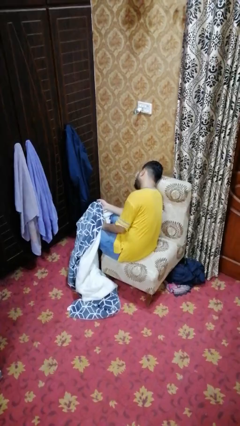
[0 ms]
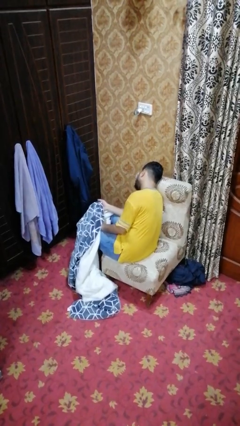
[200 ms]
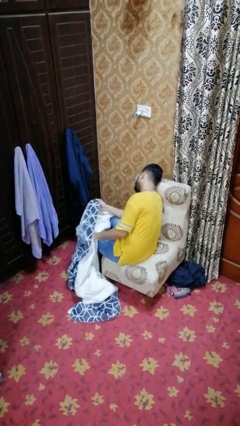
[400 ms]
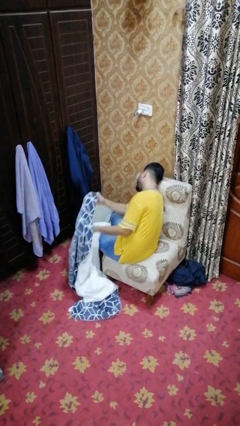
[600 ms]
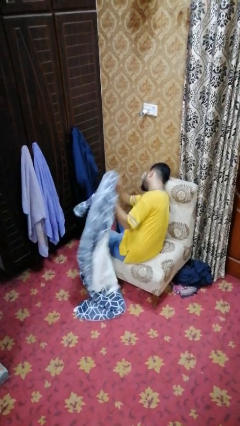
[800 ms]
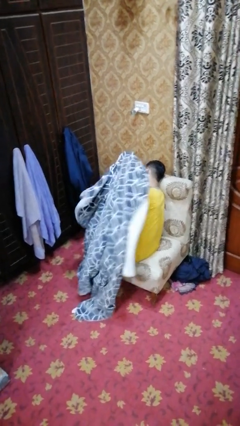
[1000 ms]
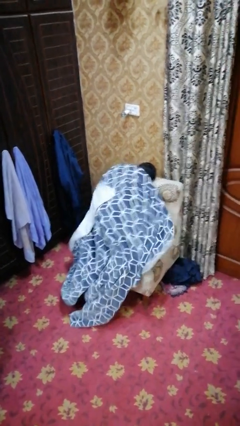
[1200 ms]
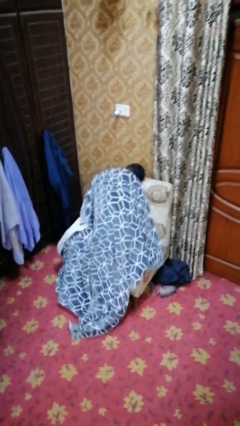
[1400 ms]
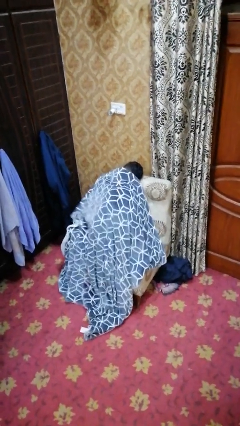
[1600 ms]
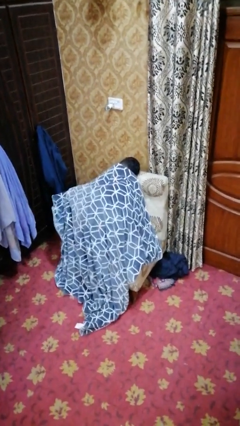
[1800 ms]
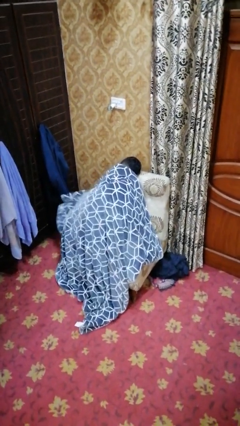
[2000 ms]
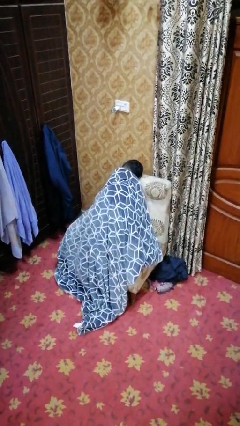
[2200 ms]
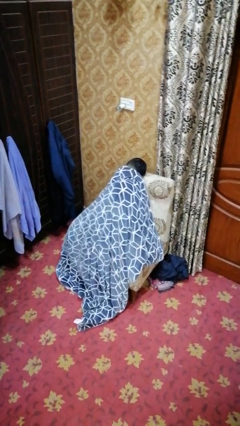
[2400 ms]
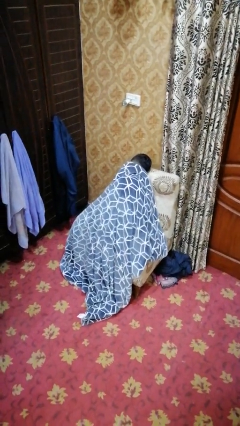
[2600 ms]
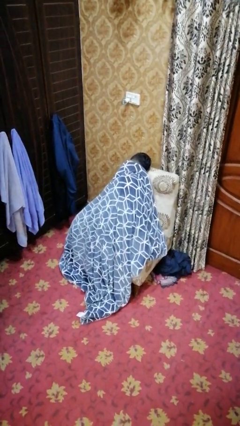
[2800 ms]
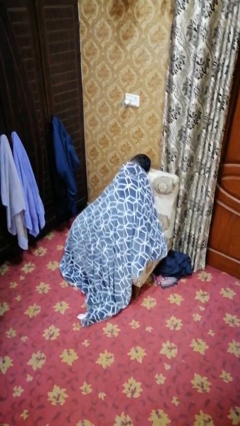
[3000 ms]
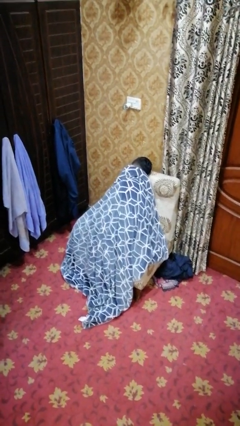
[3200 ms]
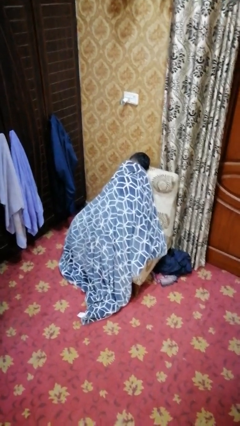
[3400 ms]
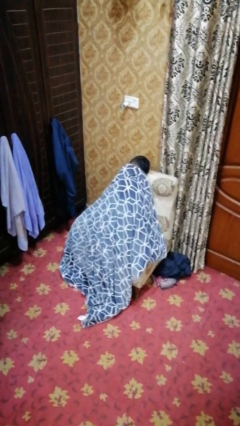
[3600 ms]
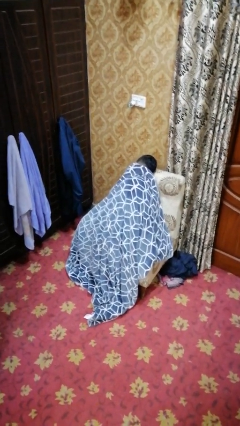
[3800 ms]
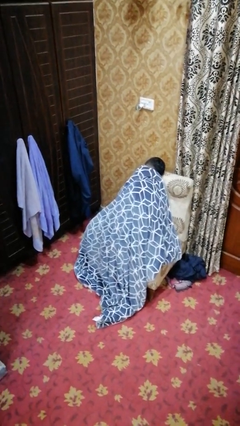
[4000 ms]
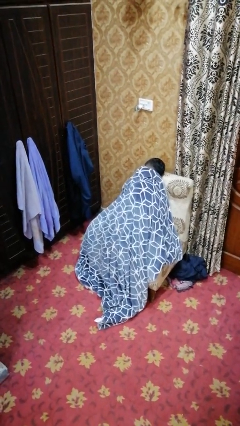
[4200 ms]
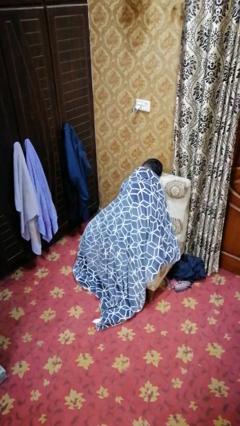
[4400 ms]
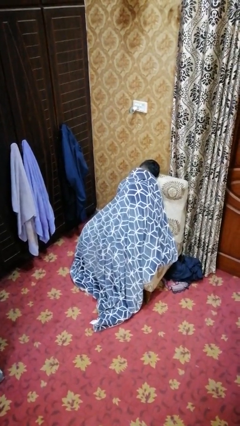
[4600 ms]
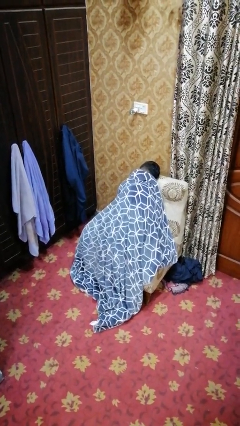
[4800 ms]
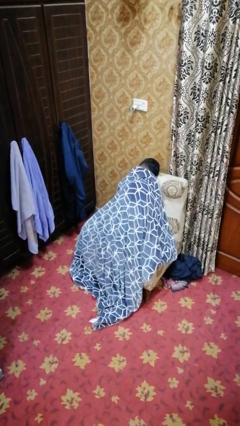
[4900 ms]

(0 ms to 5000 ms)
person covers with blanket

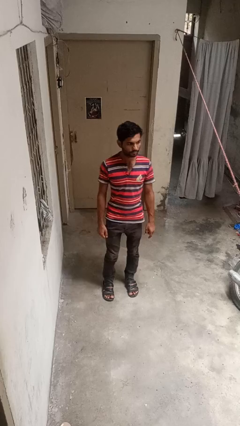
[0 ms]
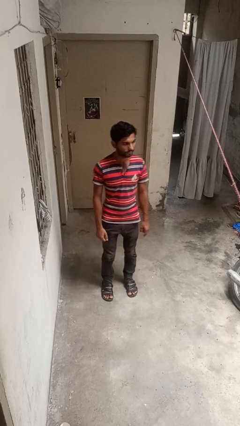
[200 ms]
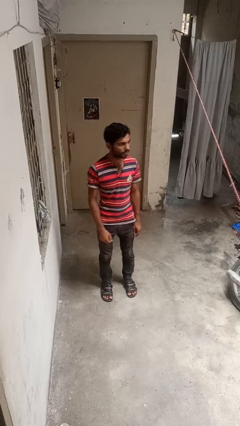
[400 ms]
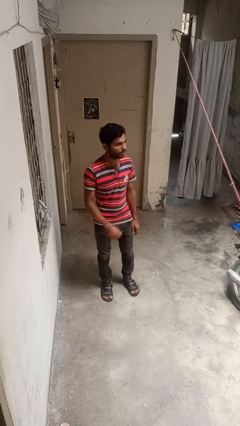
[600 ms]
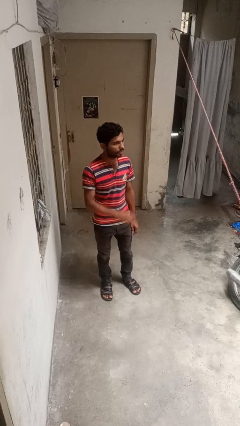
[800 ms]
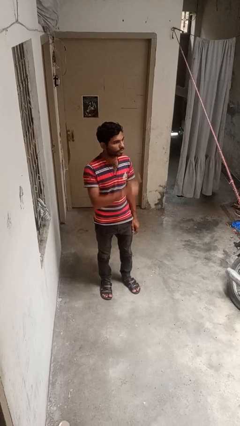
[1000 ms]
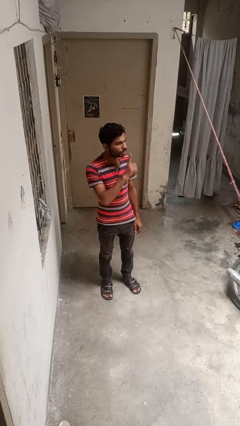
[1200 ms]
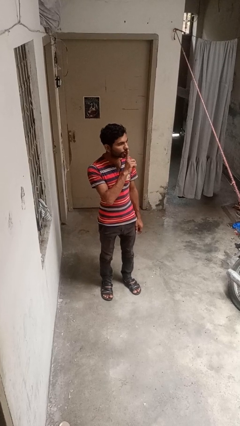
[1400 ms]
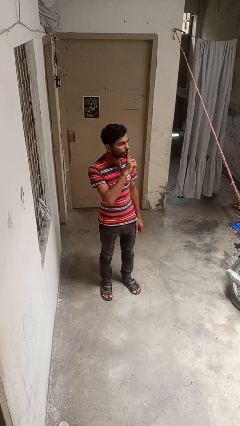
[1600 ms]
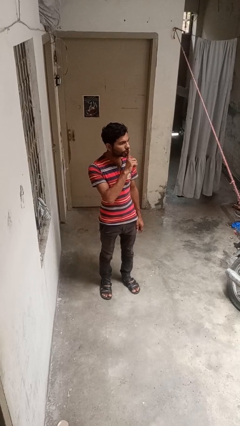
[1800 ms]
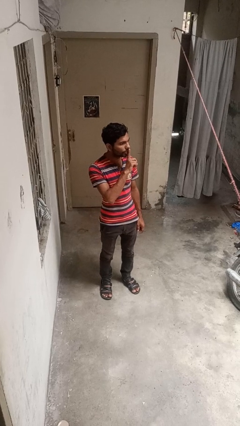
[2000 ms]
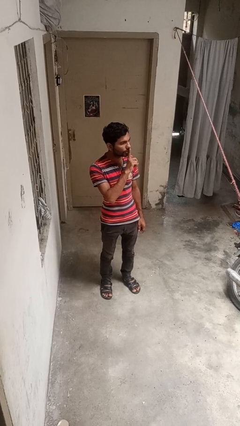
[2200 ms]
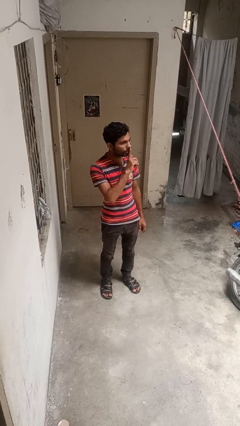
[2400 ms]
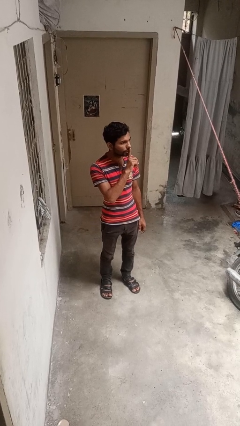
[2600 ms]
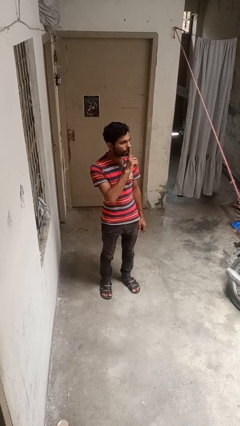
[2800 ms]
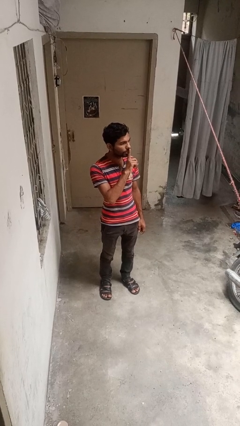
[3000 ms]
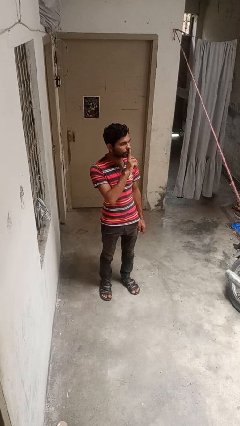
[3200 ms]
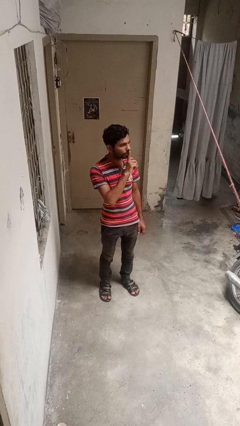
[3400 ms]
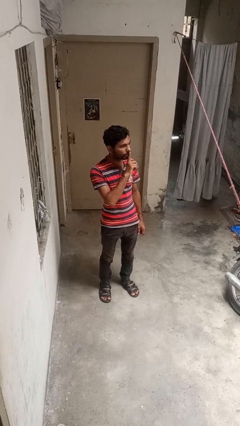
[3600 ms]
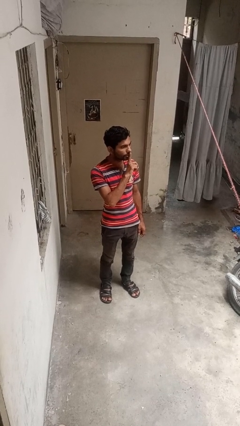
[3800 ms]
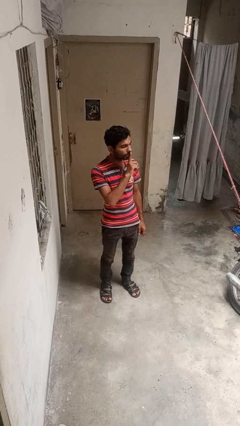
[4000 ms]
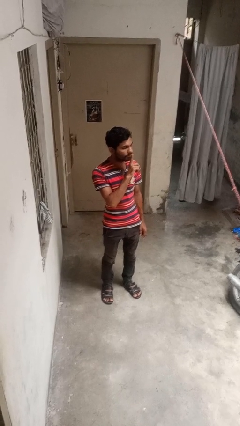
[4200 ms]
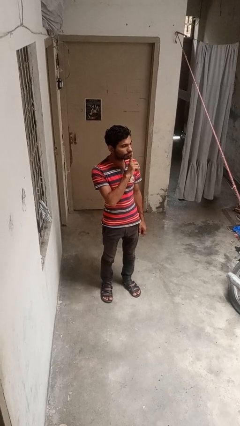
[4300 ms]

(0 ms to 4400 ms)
person gestures be quiet

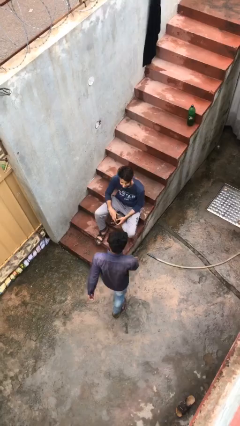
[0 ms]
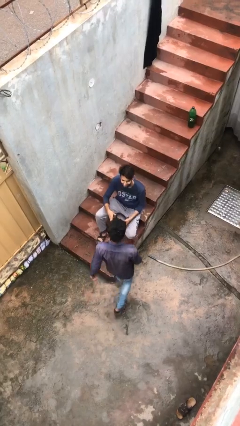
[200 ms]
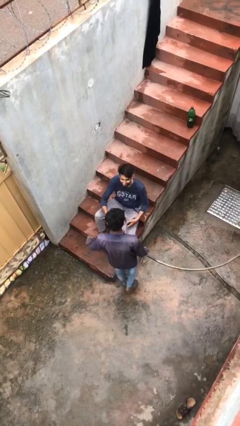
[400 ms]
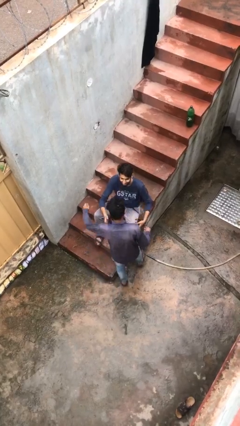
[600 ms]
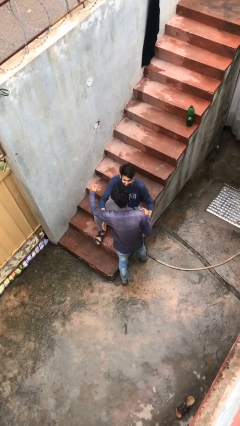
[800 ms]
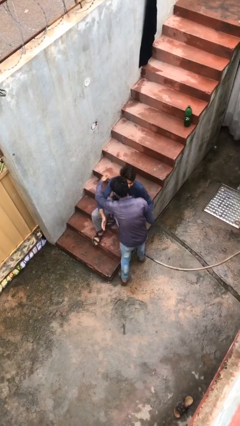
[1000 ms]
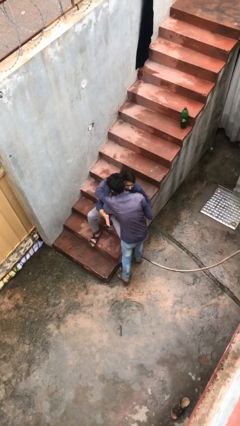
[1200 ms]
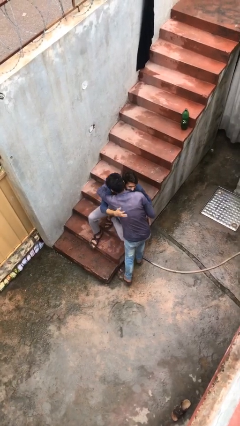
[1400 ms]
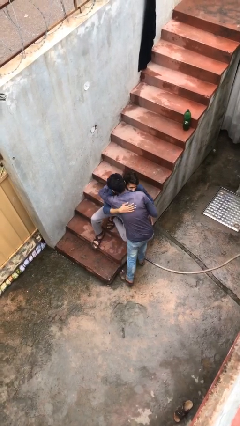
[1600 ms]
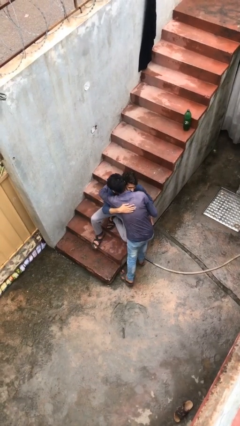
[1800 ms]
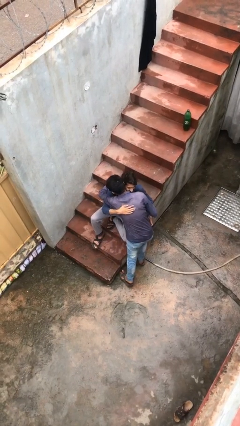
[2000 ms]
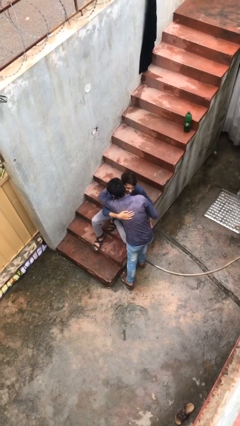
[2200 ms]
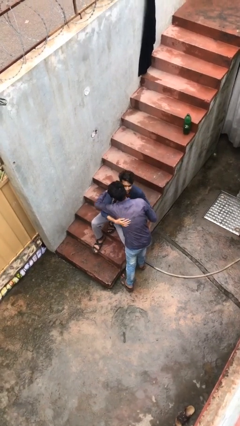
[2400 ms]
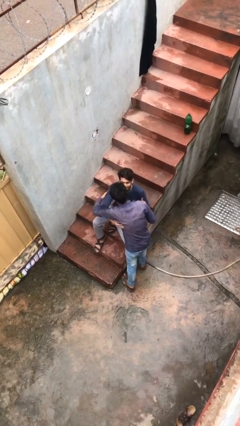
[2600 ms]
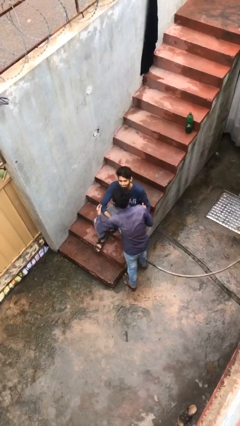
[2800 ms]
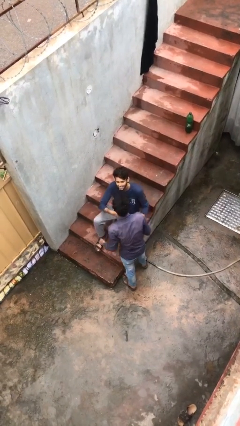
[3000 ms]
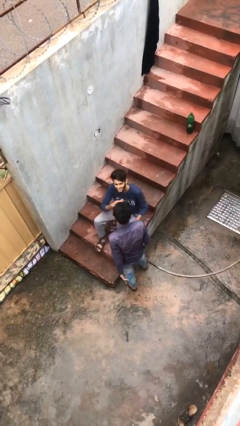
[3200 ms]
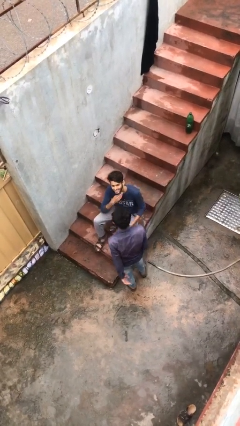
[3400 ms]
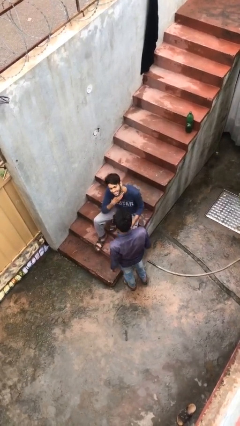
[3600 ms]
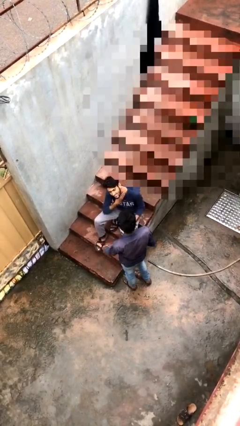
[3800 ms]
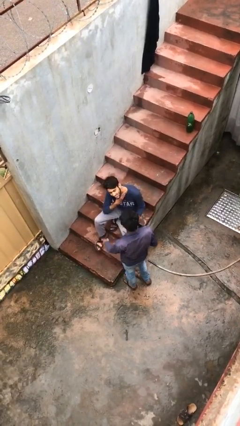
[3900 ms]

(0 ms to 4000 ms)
person embraces person

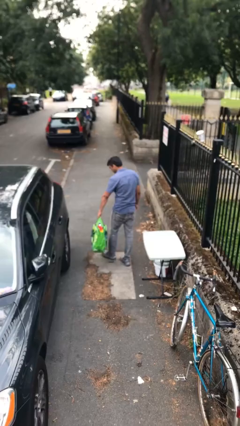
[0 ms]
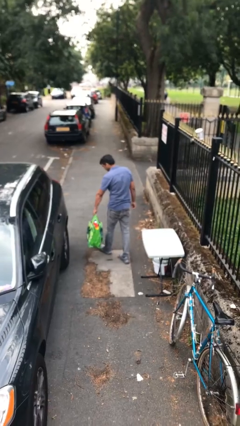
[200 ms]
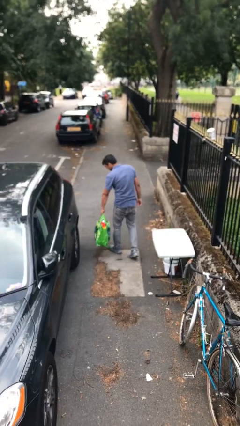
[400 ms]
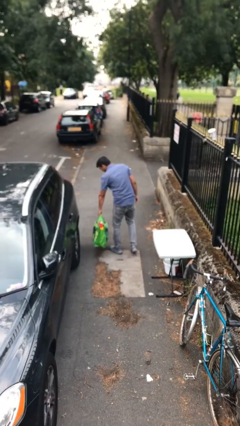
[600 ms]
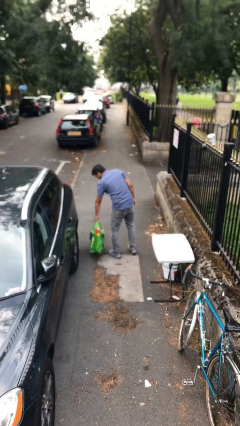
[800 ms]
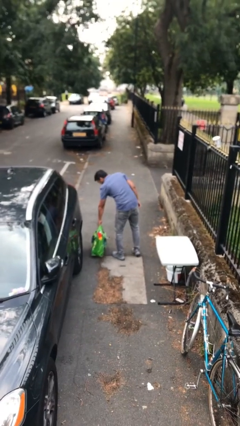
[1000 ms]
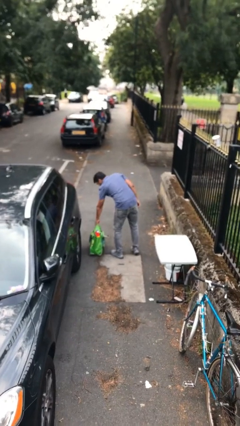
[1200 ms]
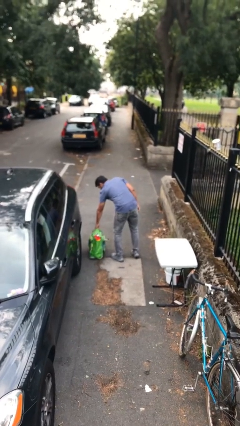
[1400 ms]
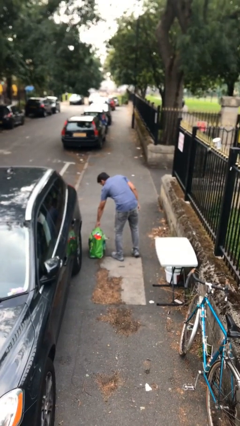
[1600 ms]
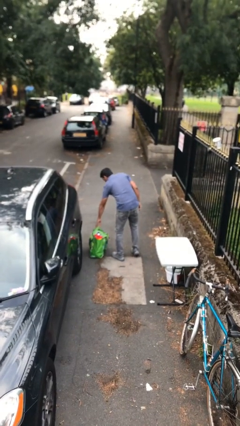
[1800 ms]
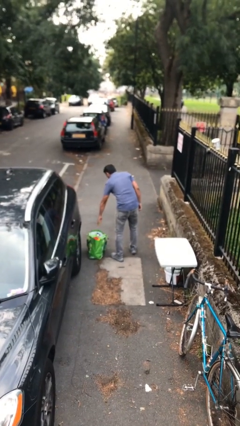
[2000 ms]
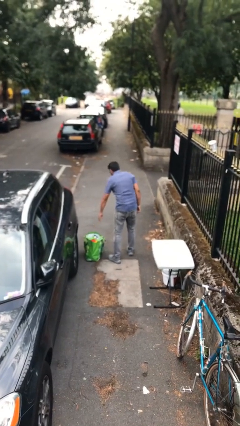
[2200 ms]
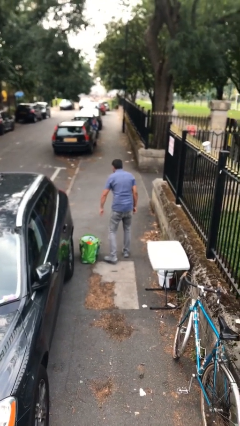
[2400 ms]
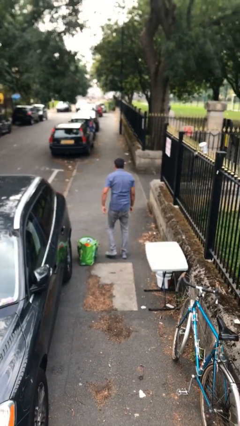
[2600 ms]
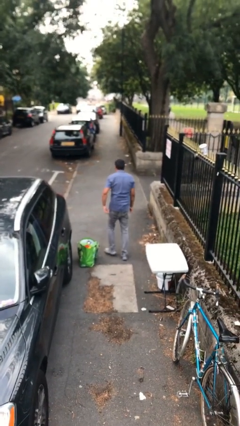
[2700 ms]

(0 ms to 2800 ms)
person puts down object on floor

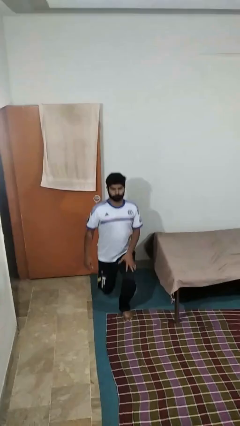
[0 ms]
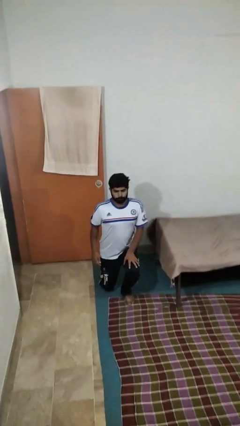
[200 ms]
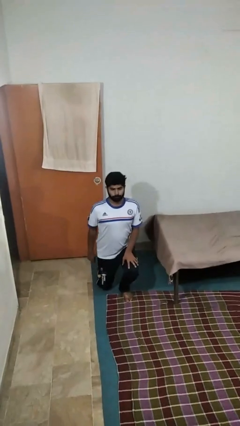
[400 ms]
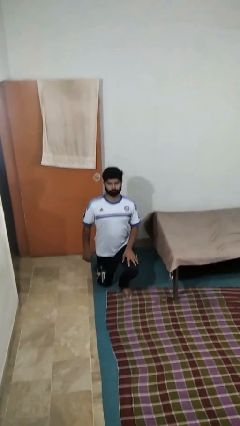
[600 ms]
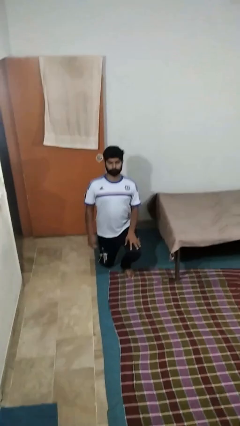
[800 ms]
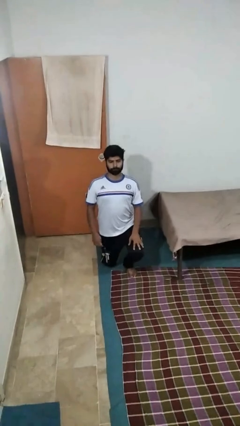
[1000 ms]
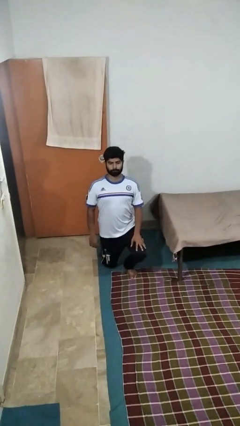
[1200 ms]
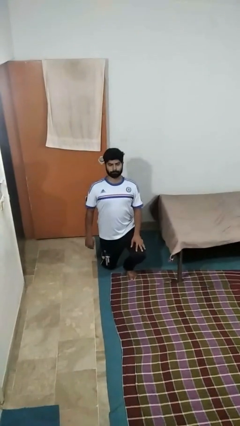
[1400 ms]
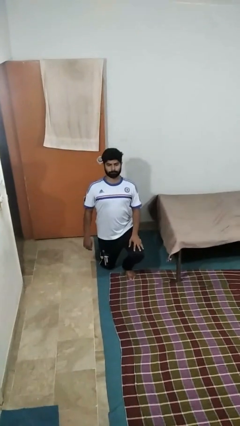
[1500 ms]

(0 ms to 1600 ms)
person kneels
